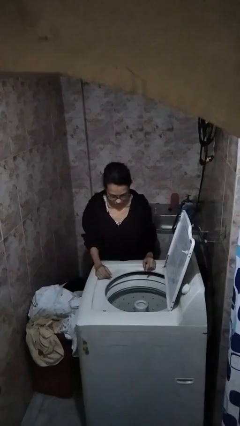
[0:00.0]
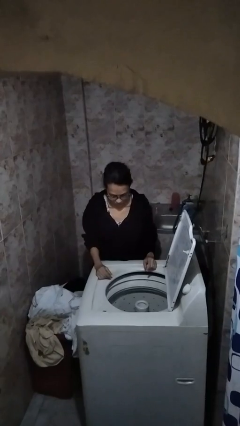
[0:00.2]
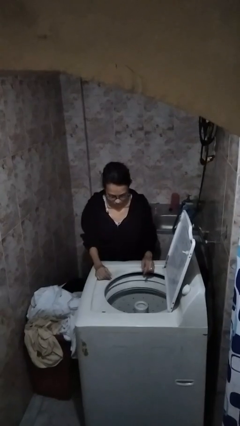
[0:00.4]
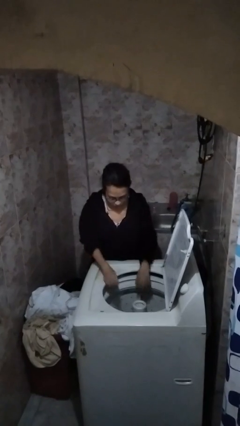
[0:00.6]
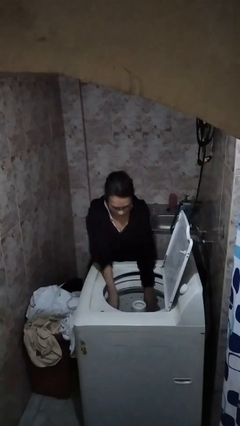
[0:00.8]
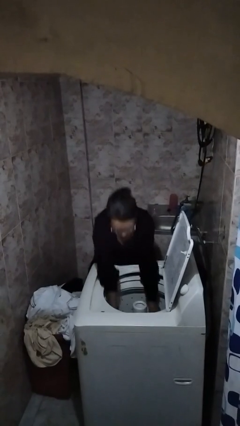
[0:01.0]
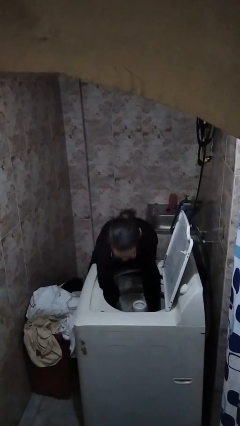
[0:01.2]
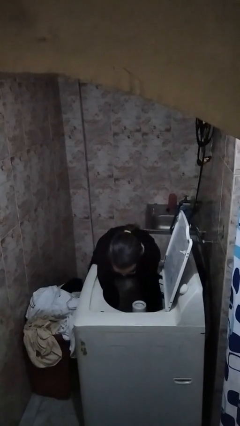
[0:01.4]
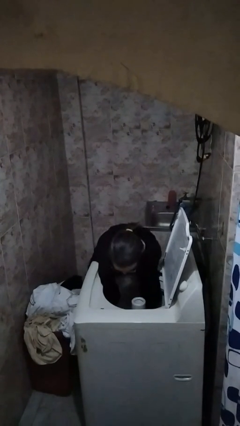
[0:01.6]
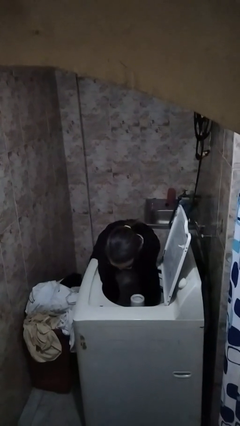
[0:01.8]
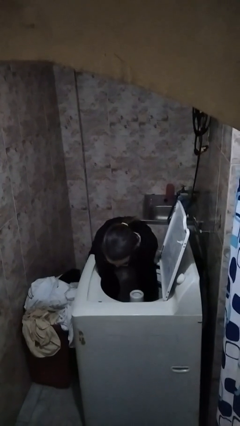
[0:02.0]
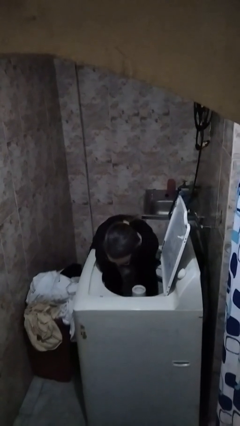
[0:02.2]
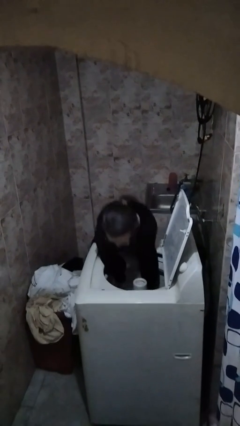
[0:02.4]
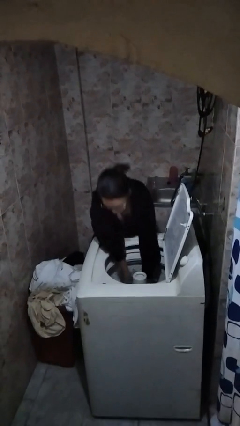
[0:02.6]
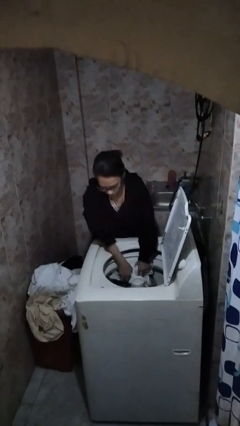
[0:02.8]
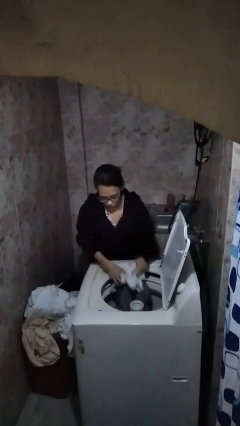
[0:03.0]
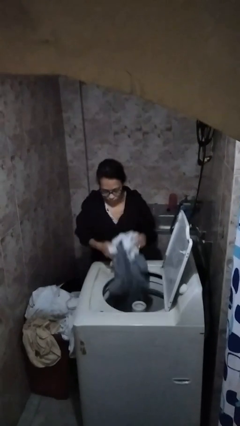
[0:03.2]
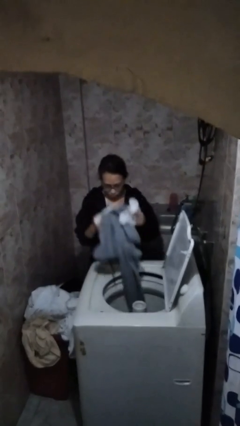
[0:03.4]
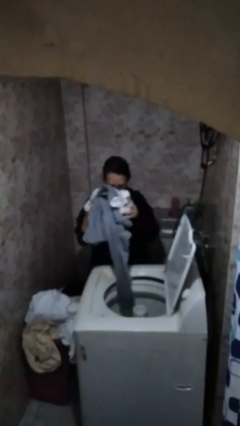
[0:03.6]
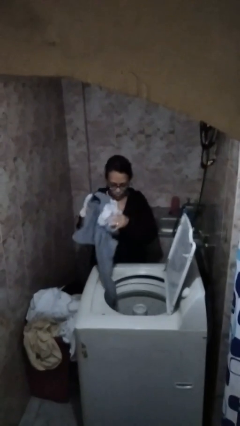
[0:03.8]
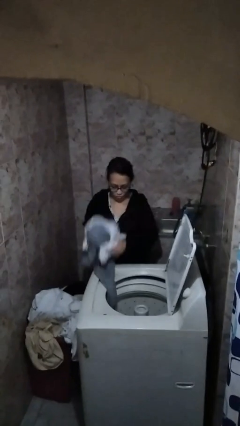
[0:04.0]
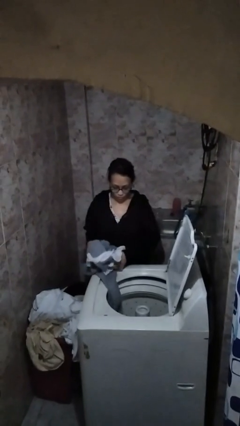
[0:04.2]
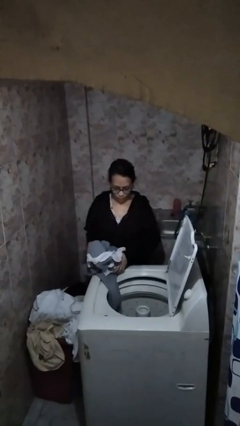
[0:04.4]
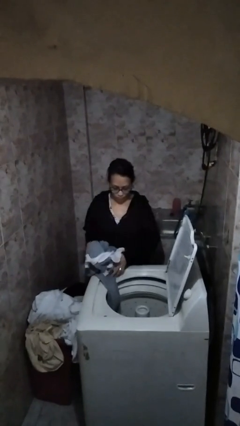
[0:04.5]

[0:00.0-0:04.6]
person unloads dryer

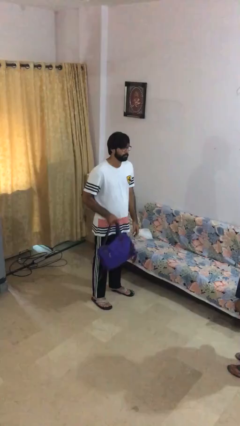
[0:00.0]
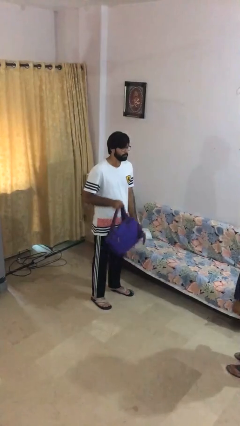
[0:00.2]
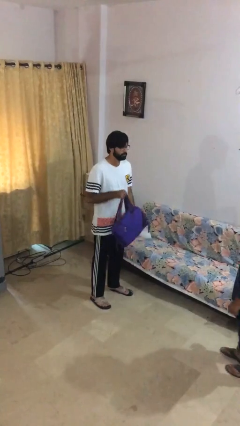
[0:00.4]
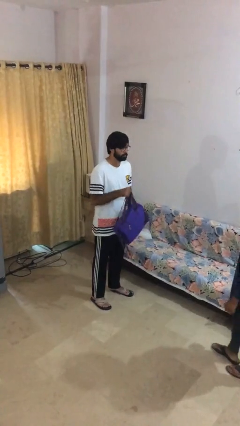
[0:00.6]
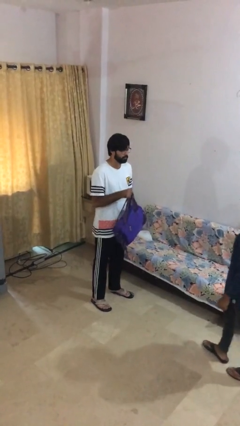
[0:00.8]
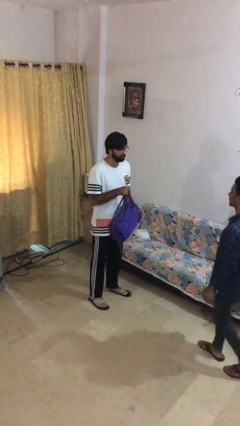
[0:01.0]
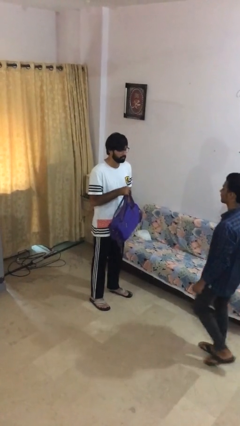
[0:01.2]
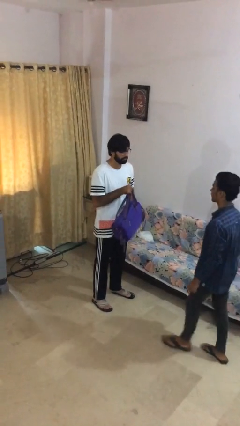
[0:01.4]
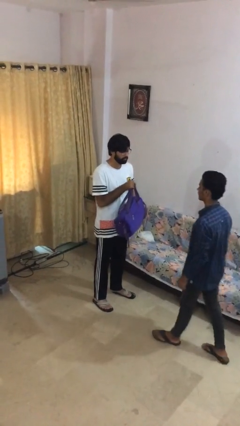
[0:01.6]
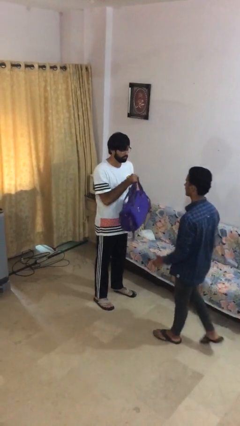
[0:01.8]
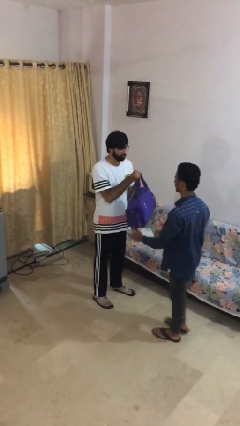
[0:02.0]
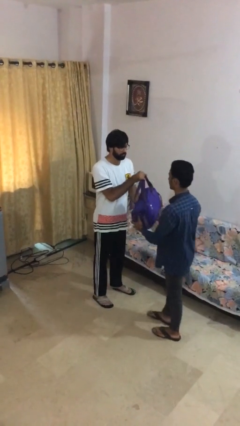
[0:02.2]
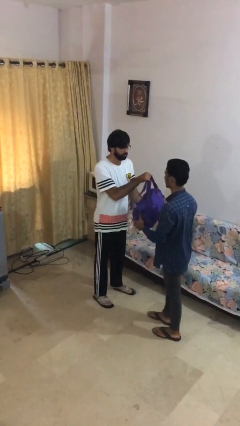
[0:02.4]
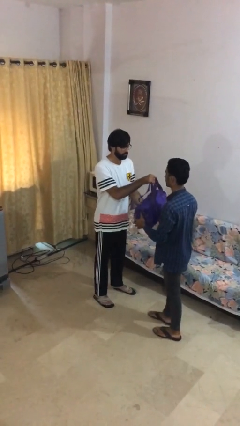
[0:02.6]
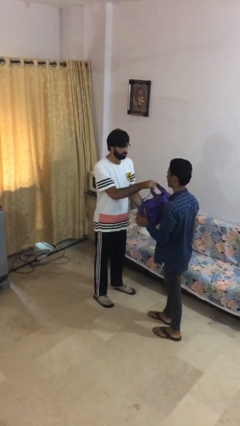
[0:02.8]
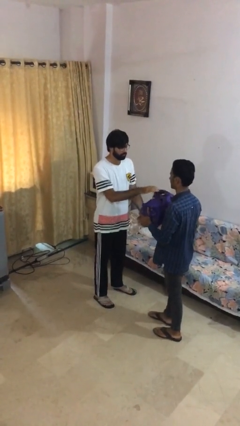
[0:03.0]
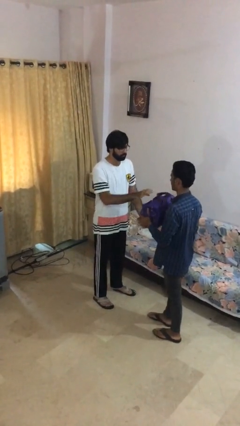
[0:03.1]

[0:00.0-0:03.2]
person transfers object to person

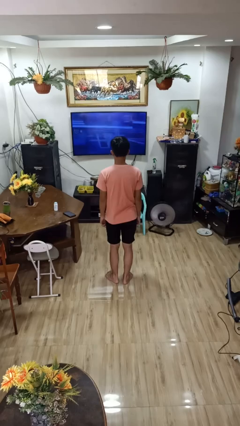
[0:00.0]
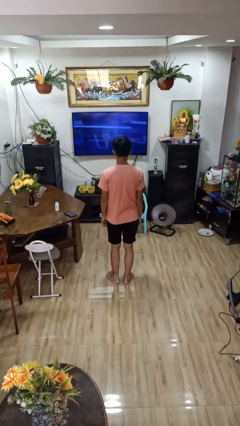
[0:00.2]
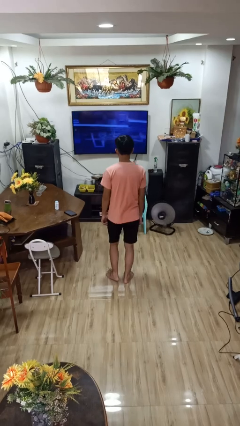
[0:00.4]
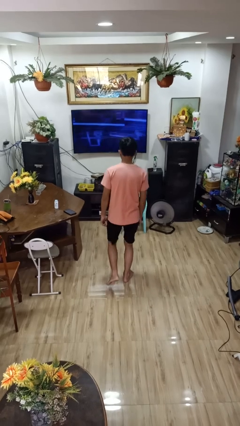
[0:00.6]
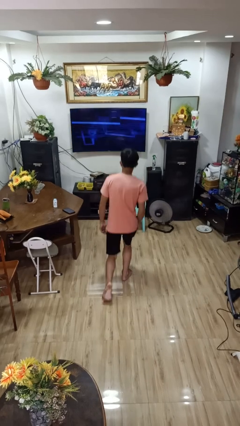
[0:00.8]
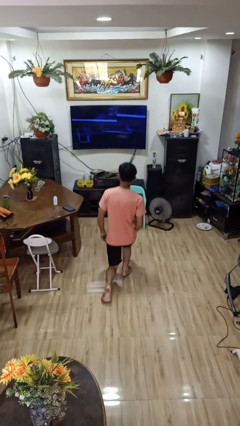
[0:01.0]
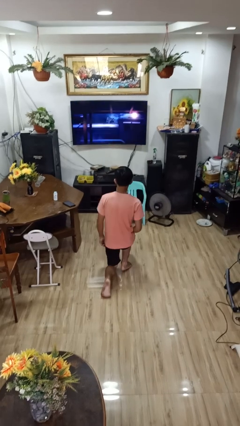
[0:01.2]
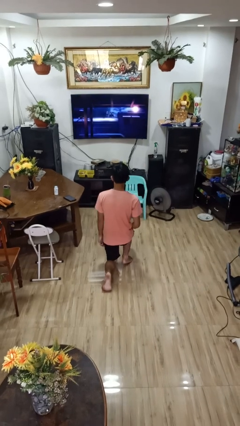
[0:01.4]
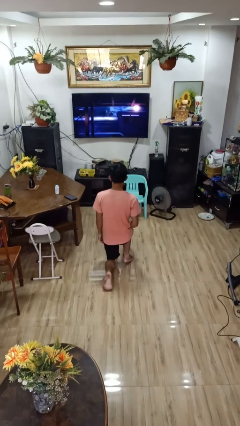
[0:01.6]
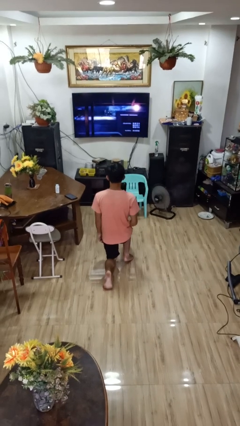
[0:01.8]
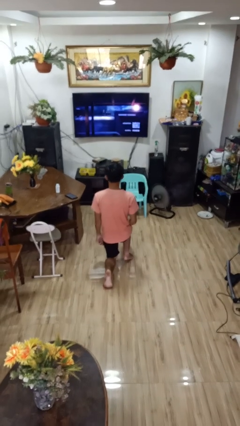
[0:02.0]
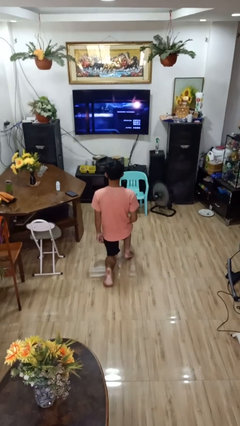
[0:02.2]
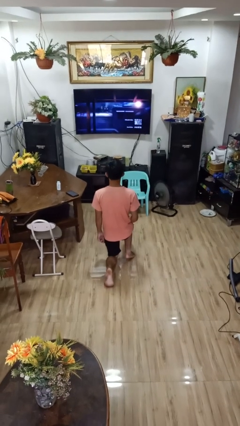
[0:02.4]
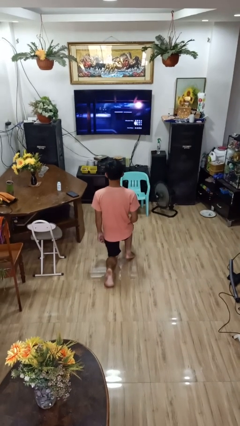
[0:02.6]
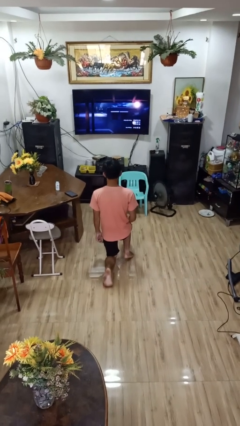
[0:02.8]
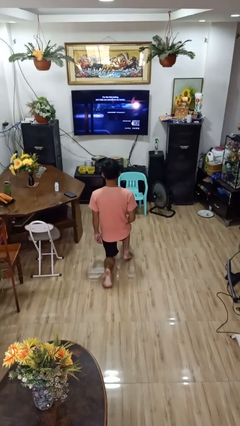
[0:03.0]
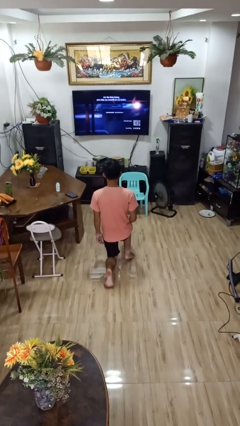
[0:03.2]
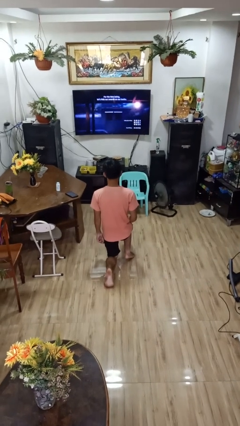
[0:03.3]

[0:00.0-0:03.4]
person kneels

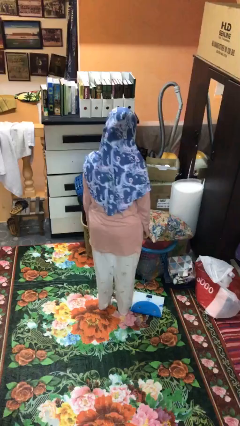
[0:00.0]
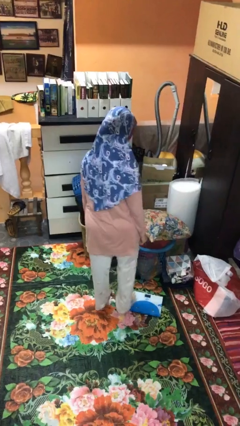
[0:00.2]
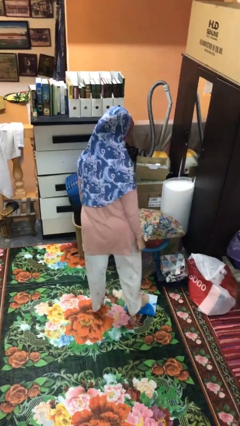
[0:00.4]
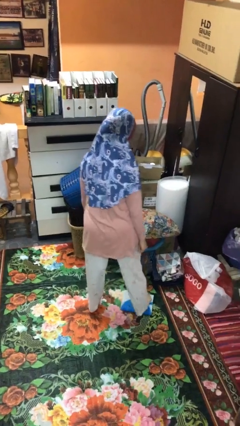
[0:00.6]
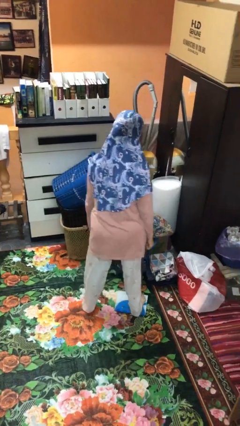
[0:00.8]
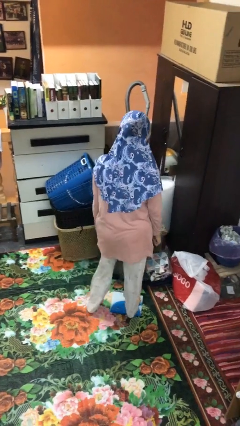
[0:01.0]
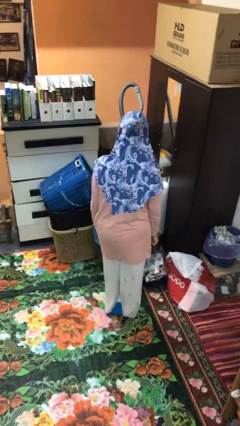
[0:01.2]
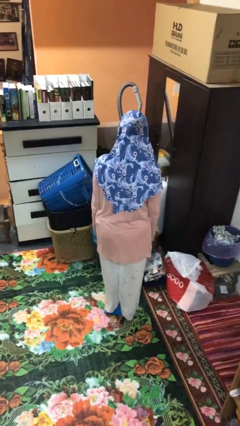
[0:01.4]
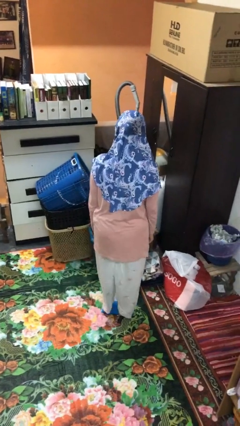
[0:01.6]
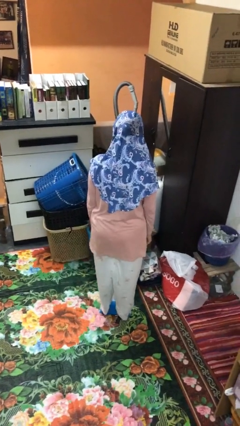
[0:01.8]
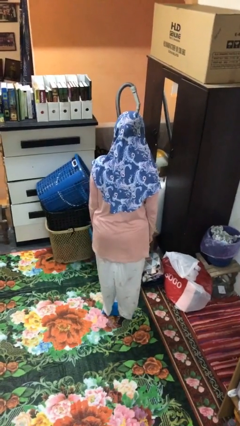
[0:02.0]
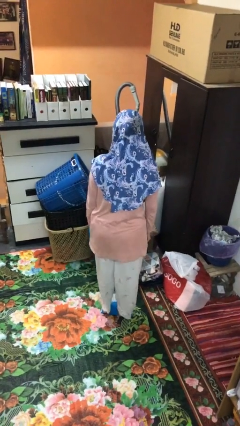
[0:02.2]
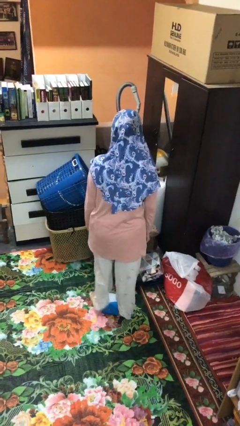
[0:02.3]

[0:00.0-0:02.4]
person uses bodyweight scale

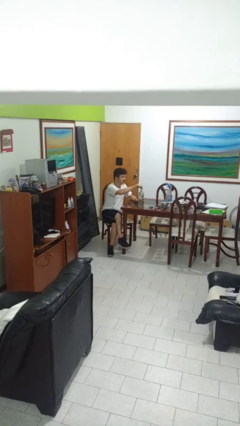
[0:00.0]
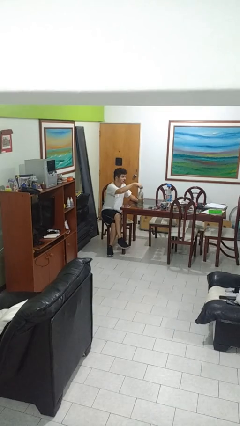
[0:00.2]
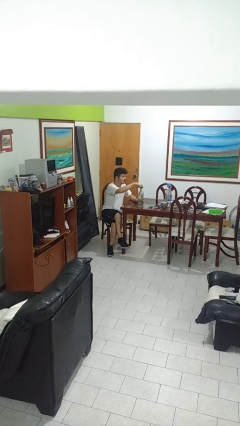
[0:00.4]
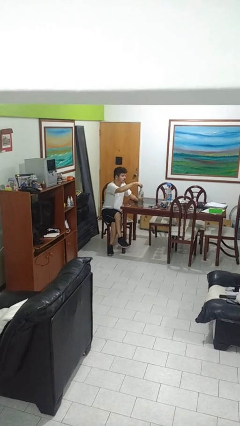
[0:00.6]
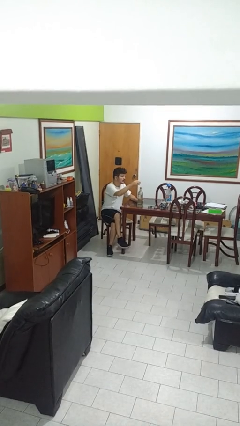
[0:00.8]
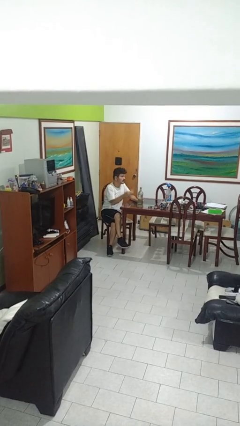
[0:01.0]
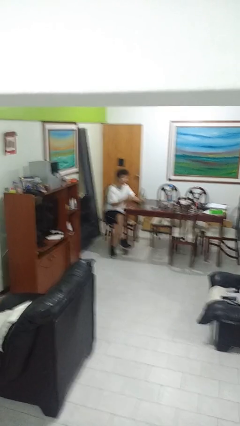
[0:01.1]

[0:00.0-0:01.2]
person unscrews lid from bottle

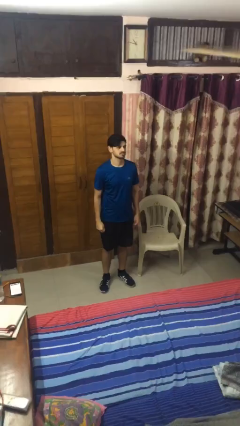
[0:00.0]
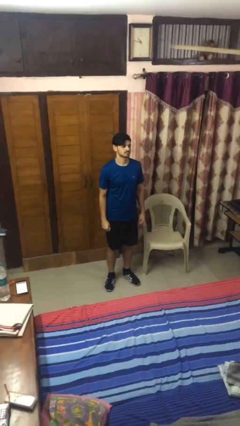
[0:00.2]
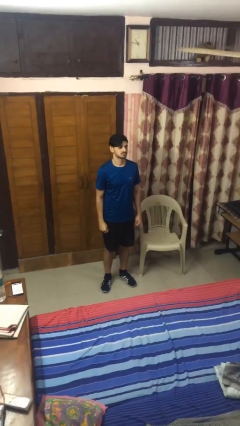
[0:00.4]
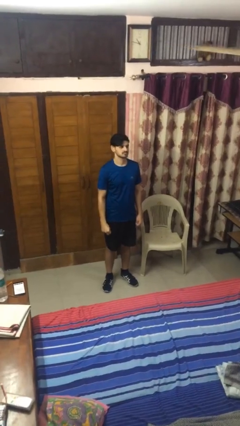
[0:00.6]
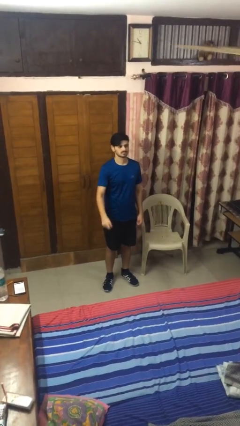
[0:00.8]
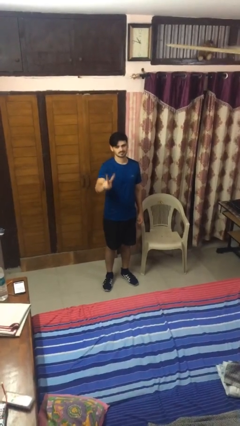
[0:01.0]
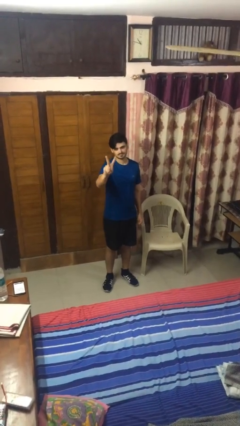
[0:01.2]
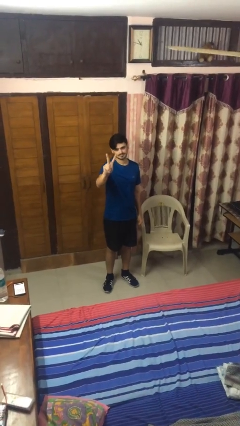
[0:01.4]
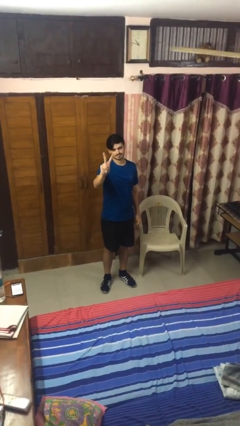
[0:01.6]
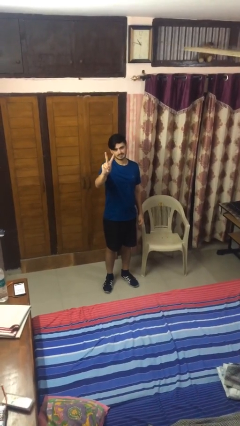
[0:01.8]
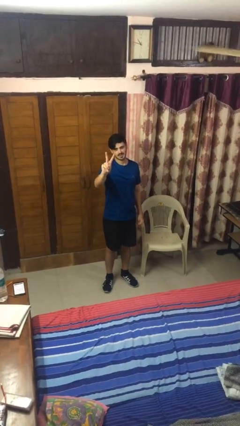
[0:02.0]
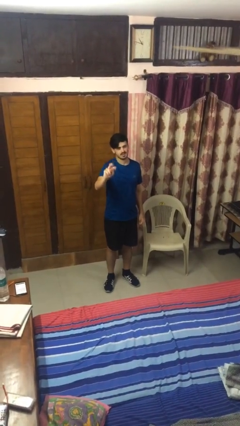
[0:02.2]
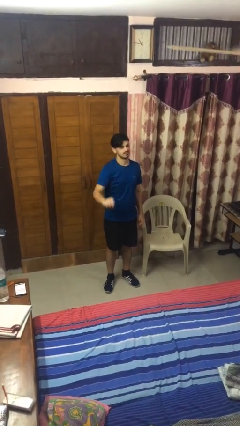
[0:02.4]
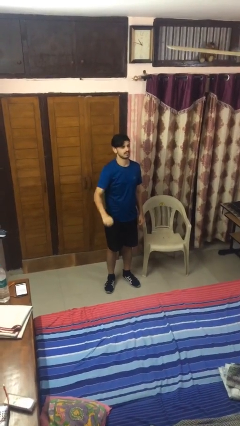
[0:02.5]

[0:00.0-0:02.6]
person gestures peace
